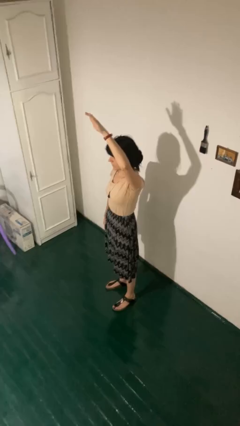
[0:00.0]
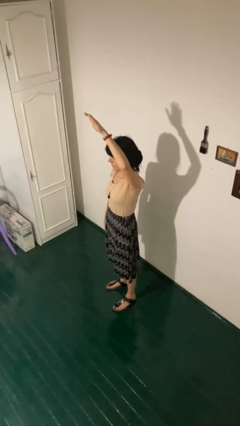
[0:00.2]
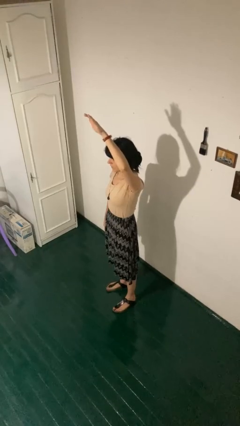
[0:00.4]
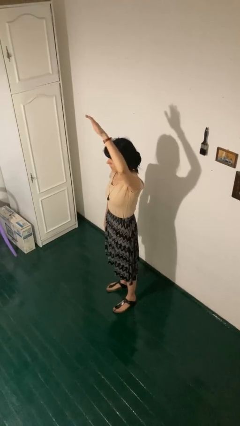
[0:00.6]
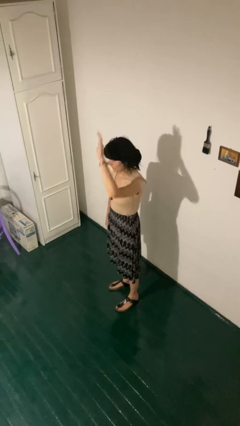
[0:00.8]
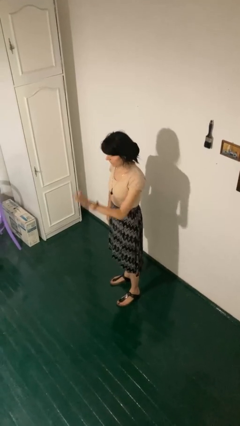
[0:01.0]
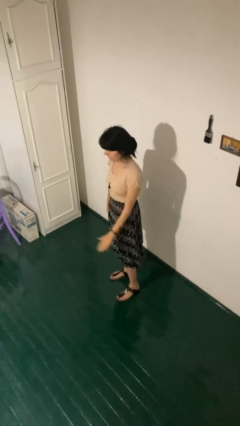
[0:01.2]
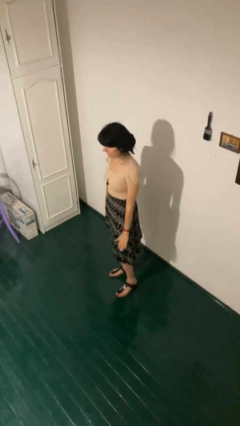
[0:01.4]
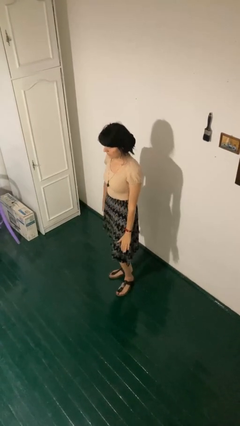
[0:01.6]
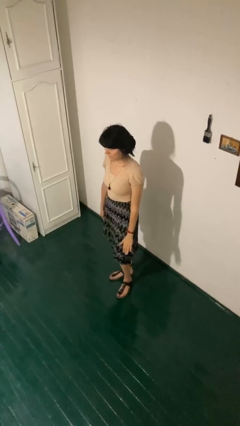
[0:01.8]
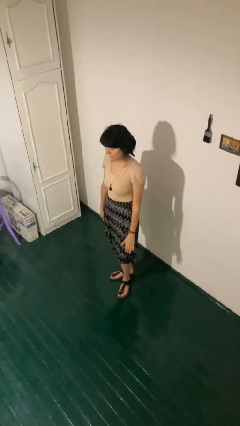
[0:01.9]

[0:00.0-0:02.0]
person gestures swipe down

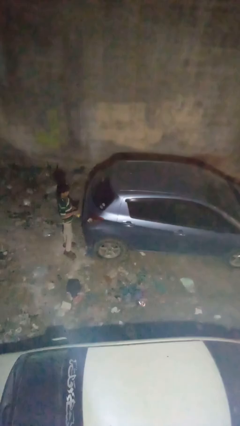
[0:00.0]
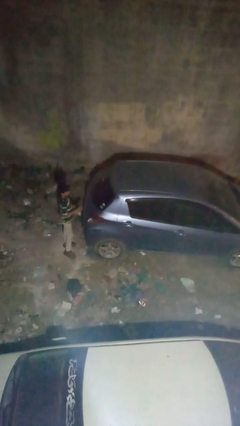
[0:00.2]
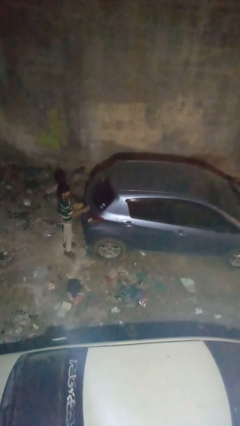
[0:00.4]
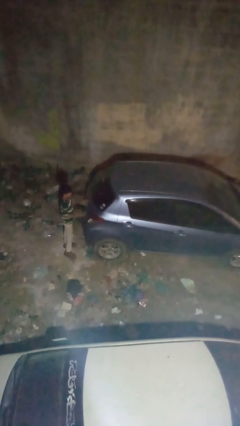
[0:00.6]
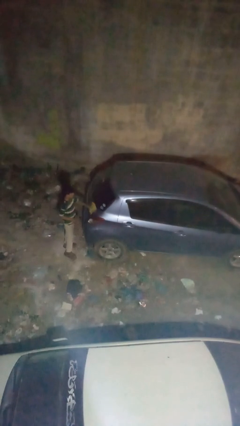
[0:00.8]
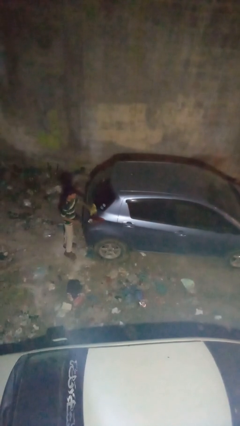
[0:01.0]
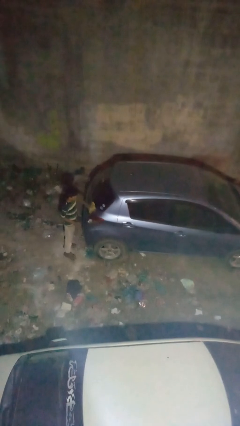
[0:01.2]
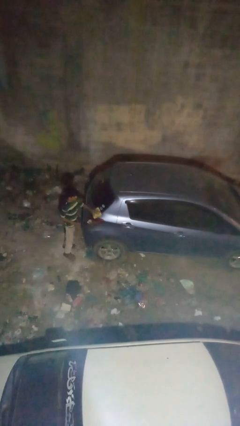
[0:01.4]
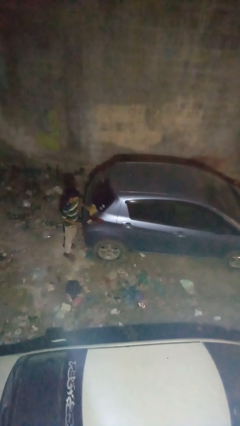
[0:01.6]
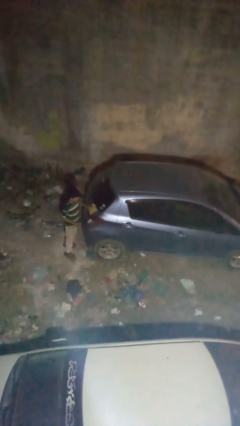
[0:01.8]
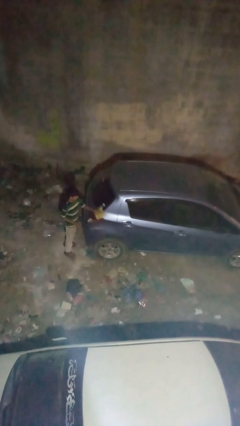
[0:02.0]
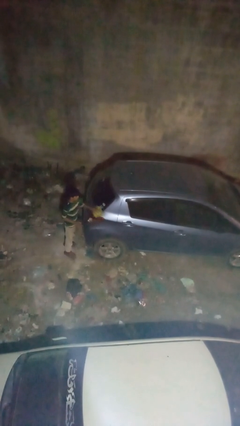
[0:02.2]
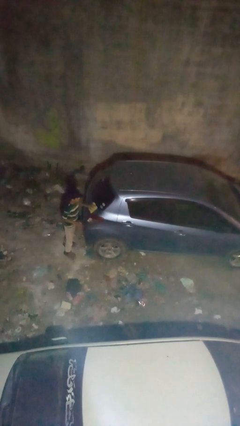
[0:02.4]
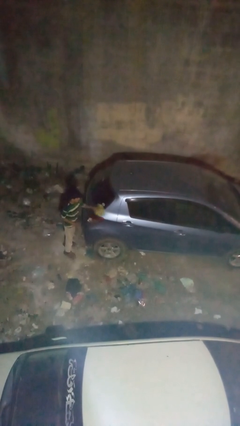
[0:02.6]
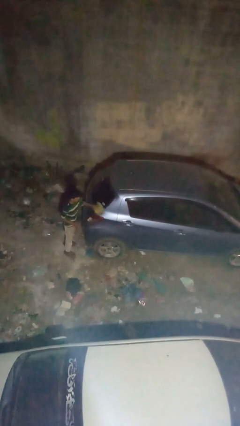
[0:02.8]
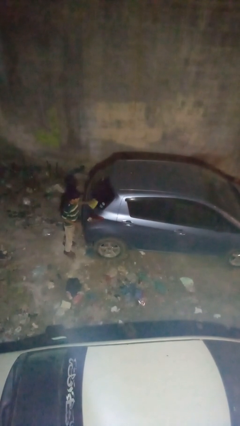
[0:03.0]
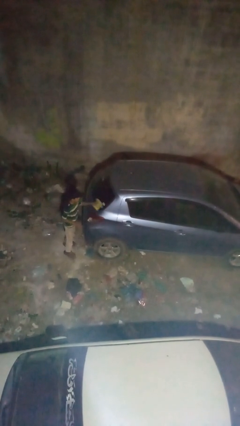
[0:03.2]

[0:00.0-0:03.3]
person polishes car with rag

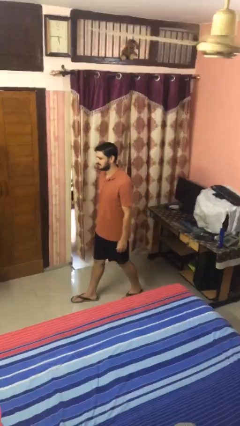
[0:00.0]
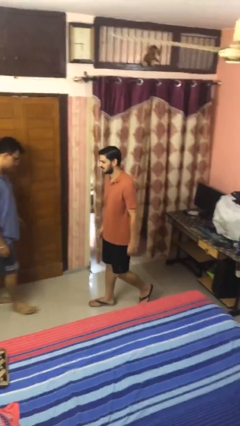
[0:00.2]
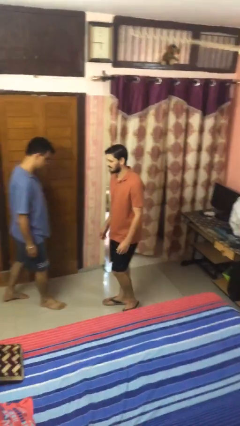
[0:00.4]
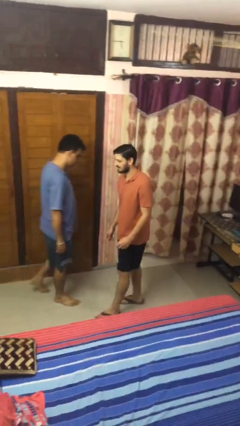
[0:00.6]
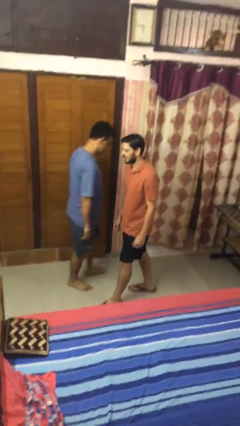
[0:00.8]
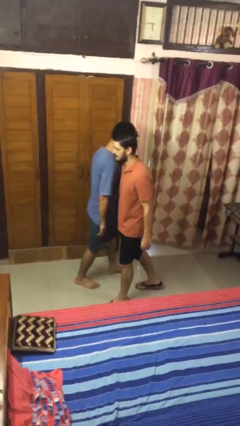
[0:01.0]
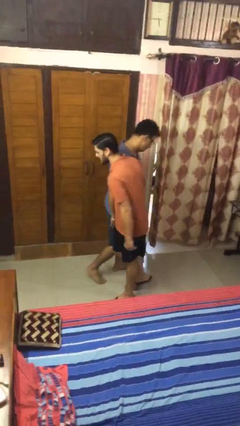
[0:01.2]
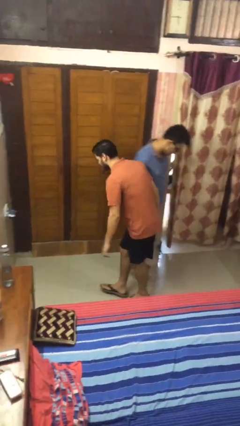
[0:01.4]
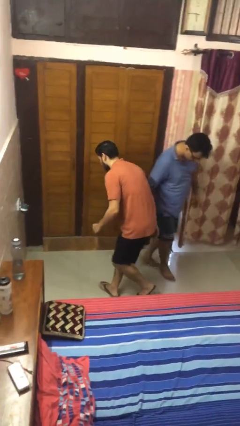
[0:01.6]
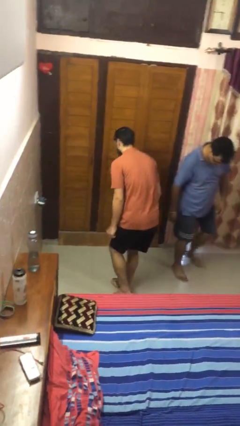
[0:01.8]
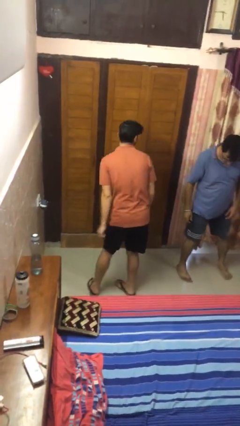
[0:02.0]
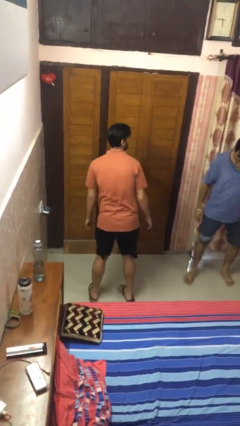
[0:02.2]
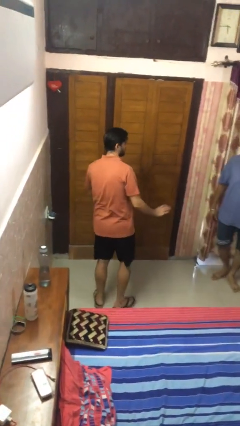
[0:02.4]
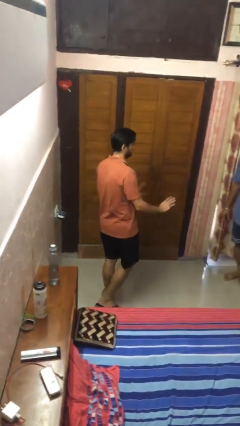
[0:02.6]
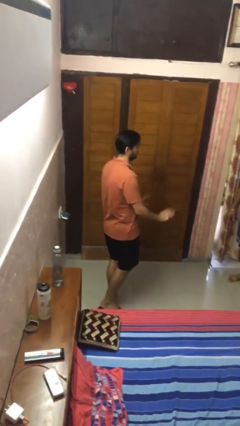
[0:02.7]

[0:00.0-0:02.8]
person bumps into person

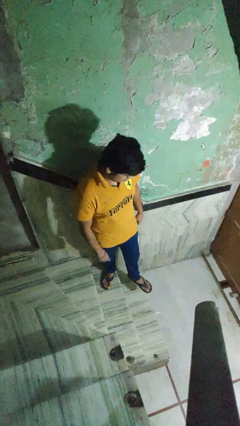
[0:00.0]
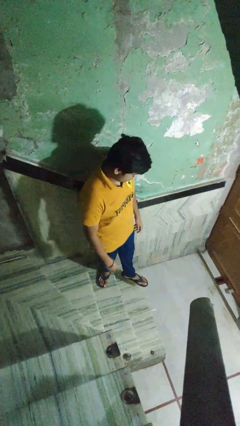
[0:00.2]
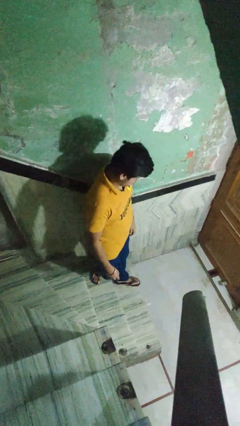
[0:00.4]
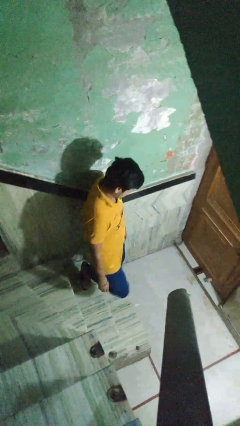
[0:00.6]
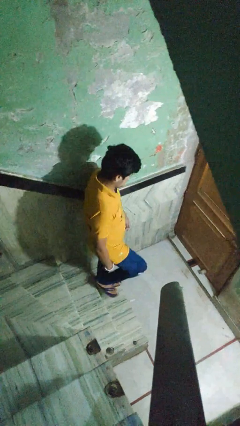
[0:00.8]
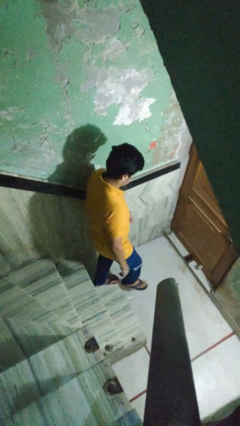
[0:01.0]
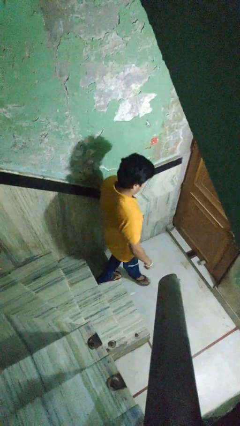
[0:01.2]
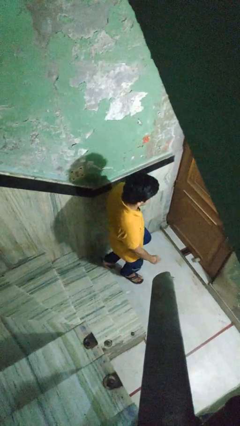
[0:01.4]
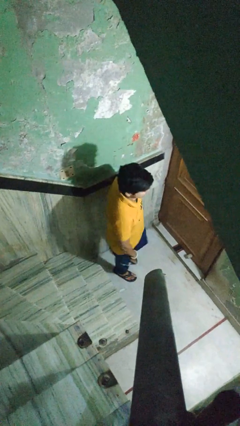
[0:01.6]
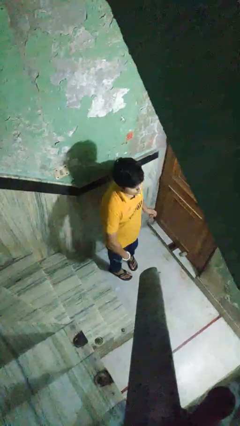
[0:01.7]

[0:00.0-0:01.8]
person climbs down stairs

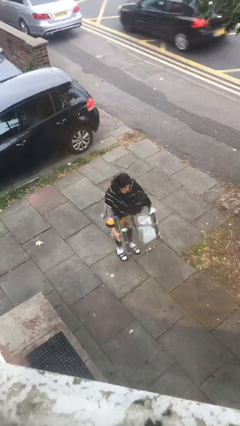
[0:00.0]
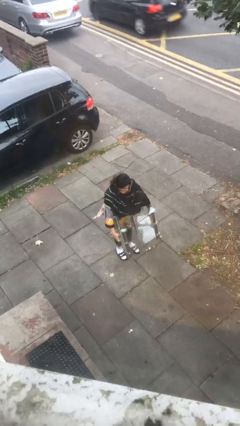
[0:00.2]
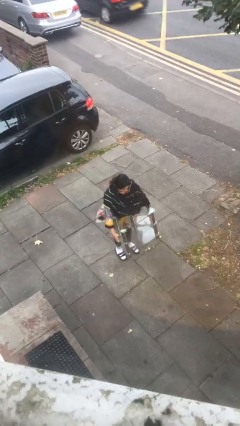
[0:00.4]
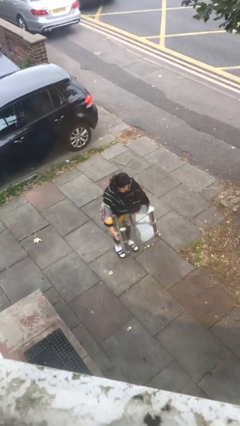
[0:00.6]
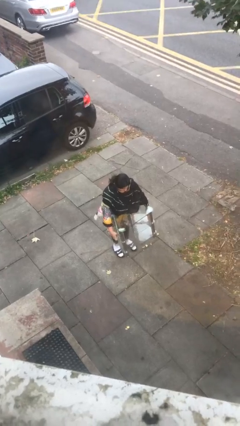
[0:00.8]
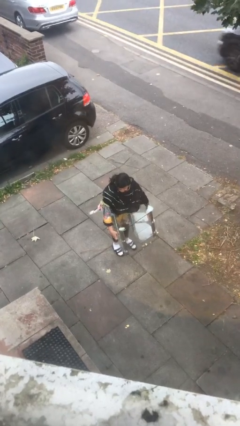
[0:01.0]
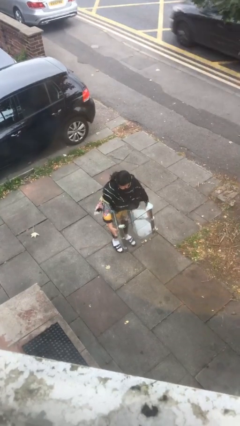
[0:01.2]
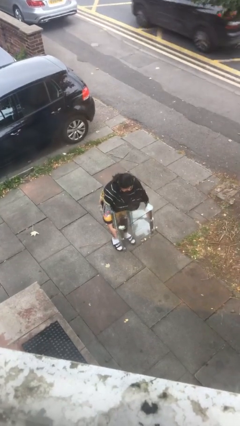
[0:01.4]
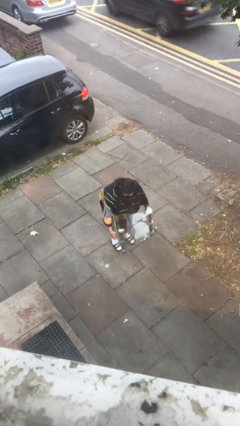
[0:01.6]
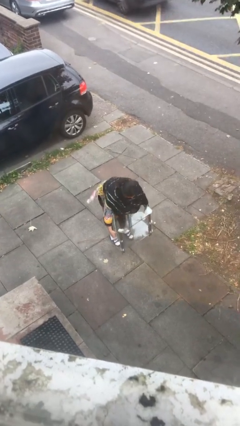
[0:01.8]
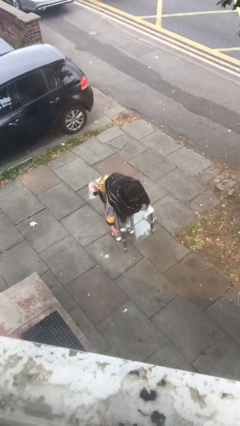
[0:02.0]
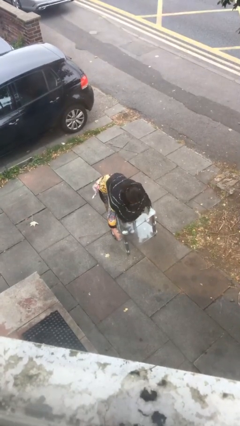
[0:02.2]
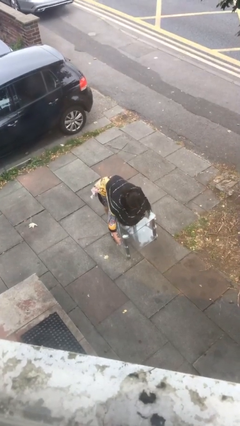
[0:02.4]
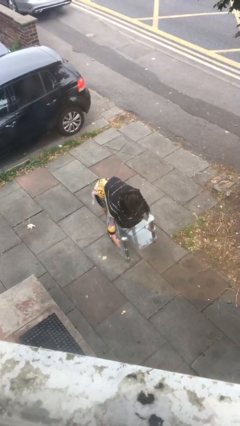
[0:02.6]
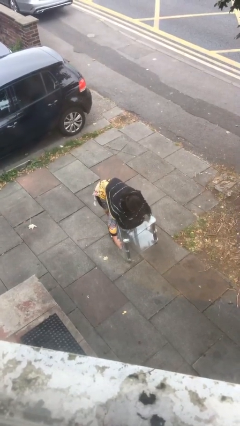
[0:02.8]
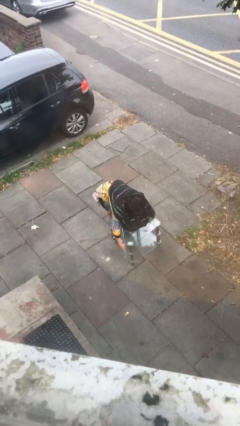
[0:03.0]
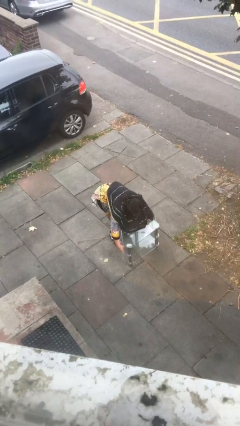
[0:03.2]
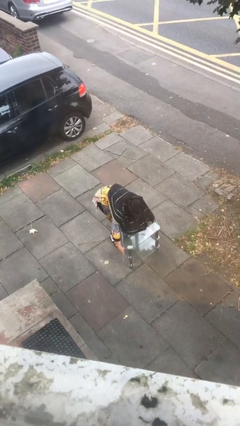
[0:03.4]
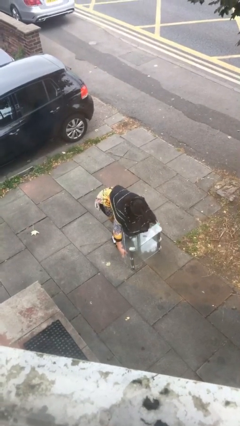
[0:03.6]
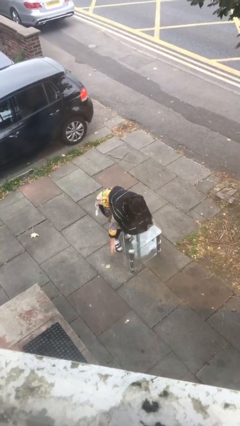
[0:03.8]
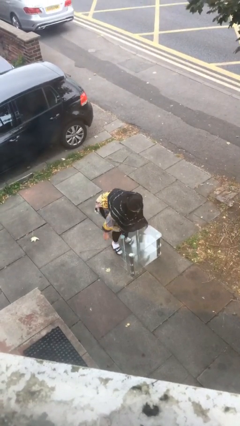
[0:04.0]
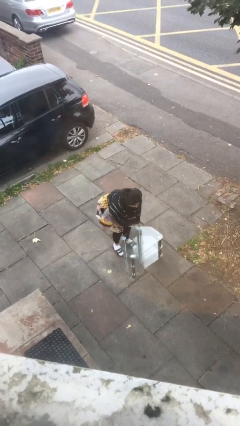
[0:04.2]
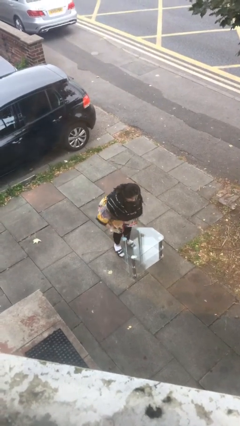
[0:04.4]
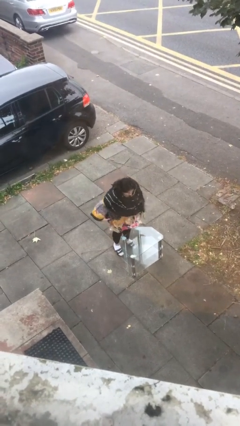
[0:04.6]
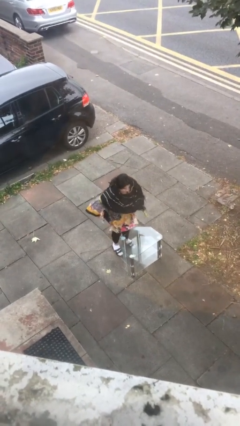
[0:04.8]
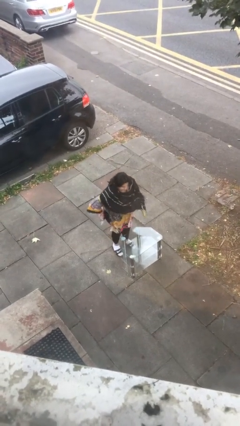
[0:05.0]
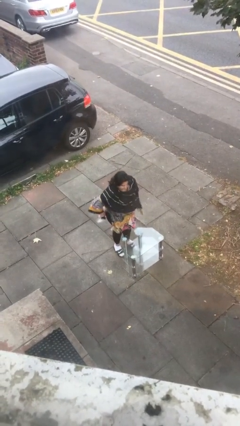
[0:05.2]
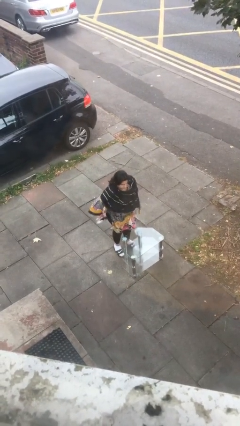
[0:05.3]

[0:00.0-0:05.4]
person puts down object on floor

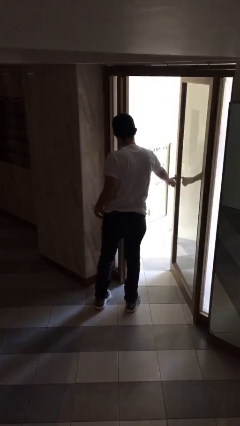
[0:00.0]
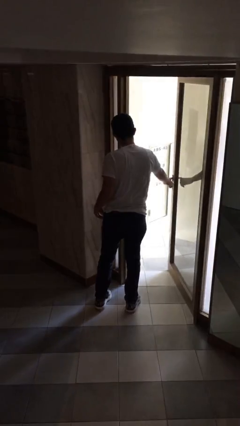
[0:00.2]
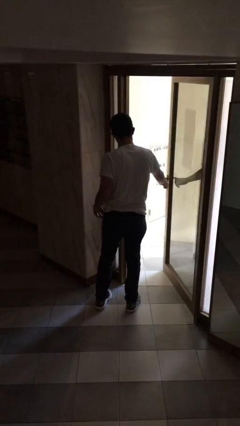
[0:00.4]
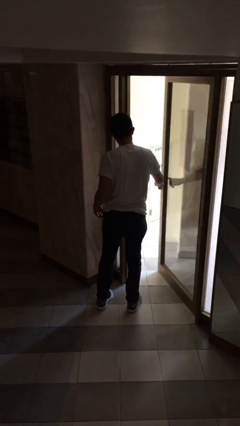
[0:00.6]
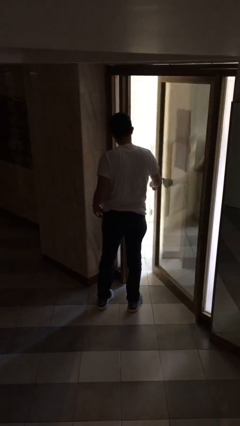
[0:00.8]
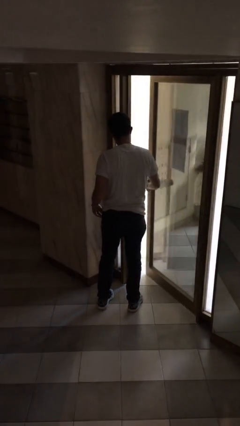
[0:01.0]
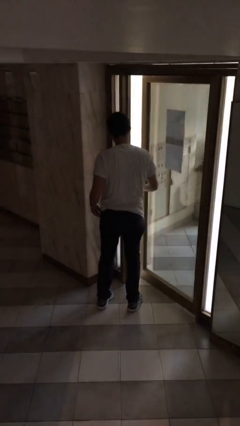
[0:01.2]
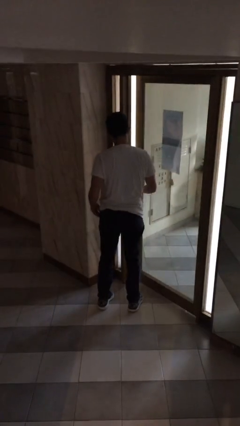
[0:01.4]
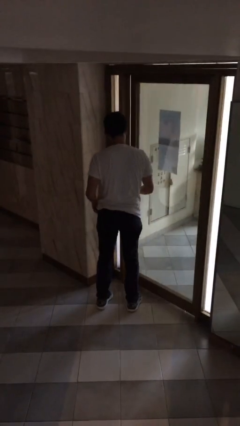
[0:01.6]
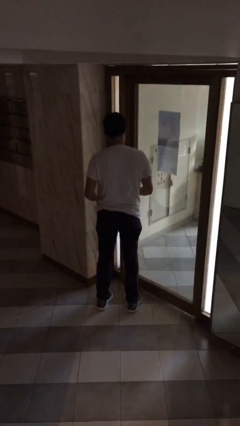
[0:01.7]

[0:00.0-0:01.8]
person closes facility door

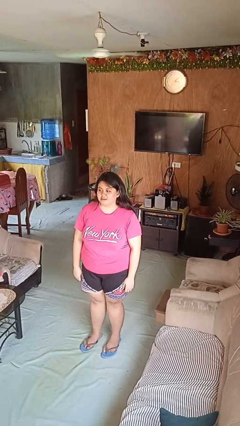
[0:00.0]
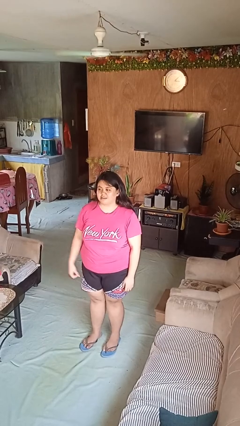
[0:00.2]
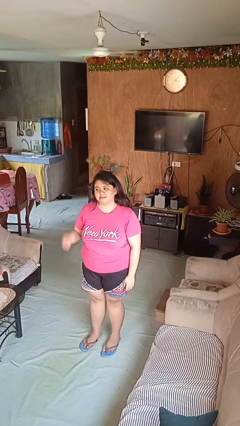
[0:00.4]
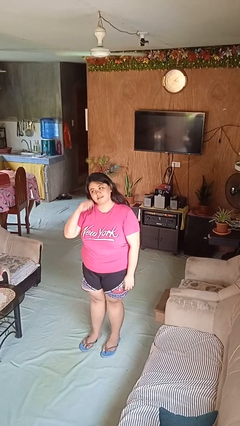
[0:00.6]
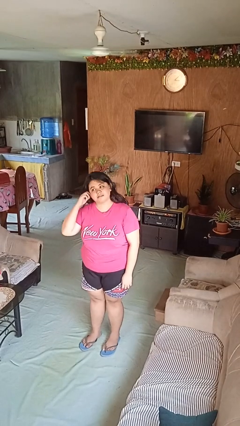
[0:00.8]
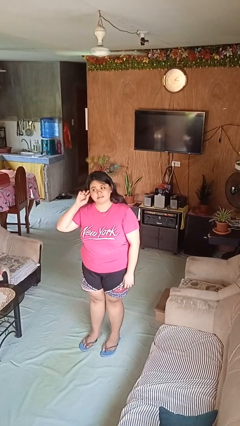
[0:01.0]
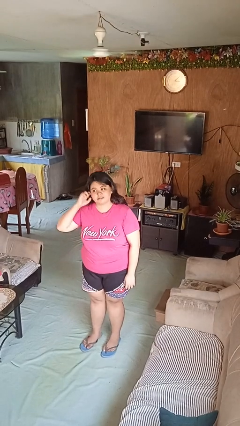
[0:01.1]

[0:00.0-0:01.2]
person touches earlobe
